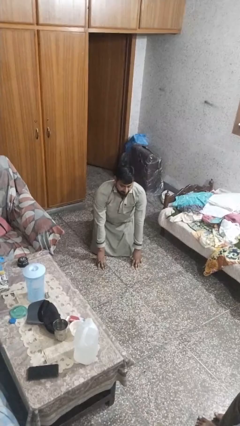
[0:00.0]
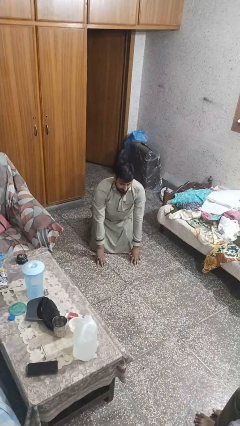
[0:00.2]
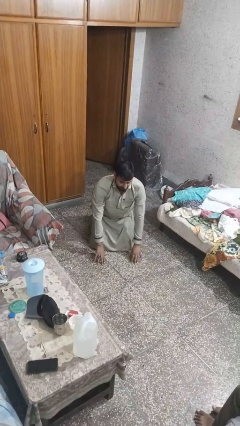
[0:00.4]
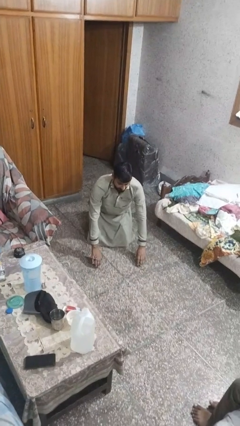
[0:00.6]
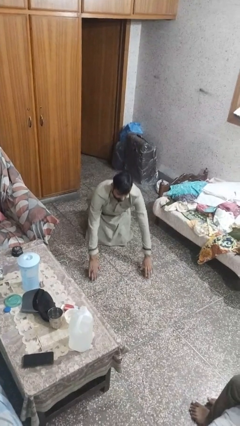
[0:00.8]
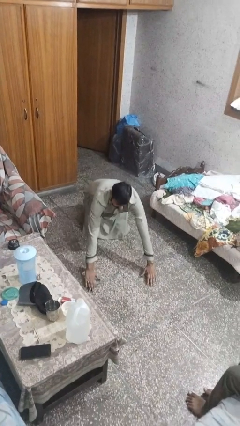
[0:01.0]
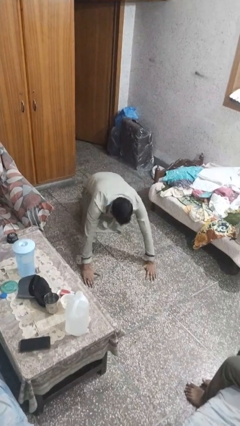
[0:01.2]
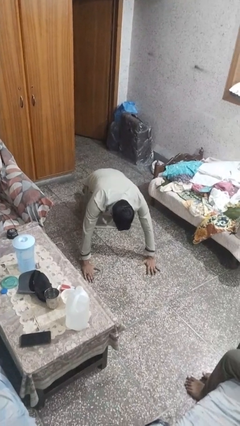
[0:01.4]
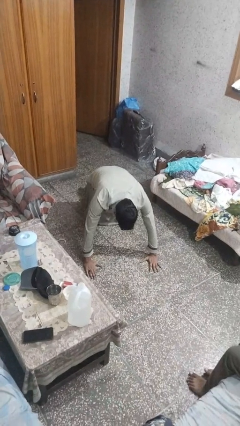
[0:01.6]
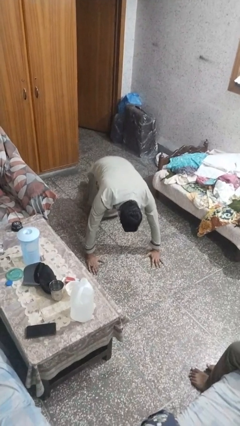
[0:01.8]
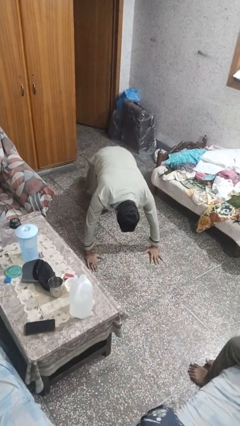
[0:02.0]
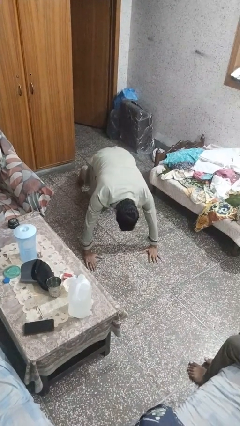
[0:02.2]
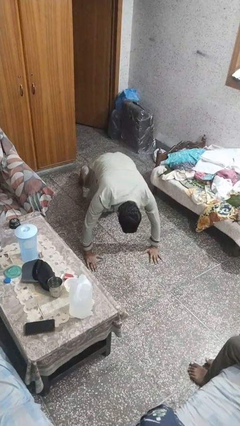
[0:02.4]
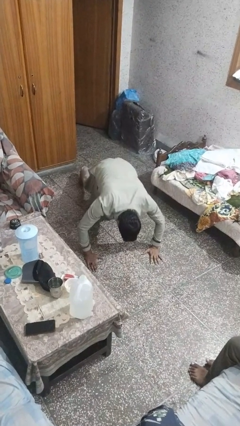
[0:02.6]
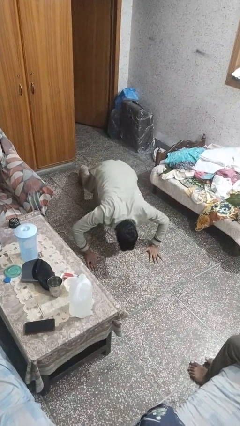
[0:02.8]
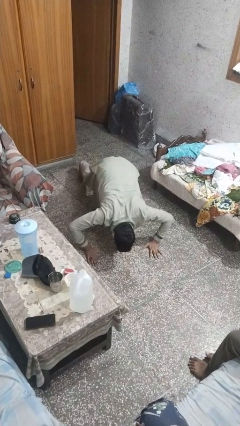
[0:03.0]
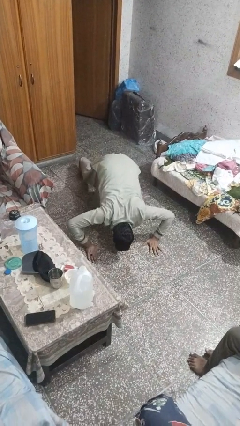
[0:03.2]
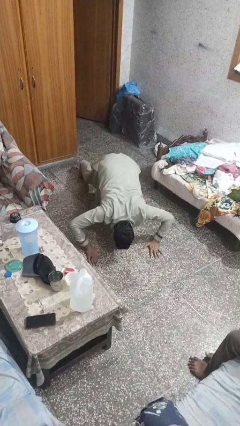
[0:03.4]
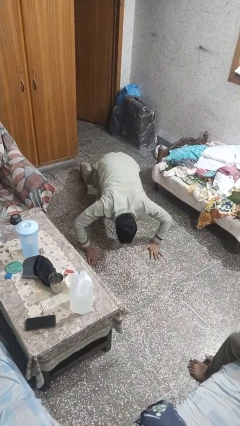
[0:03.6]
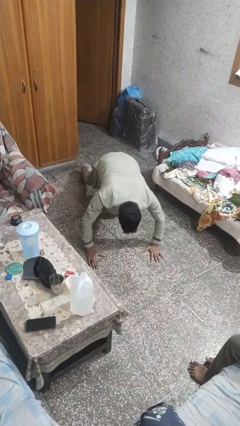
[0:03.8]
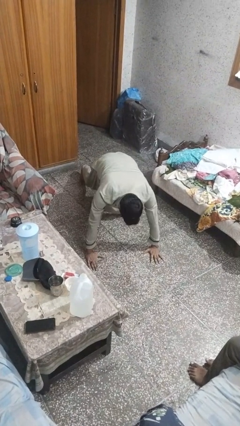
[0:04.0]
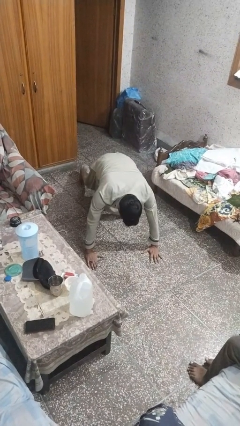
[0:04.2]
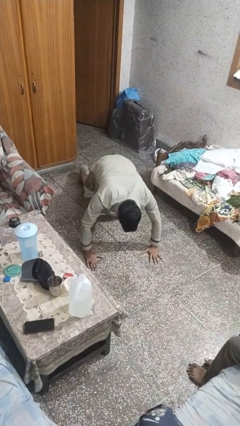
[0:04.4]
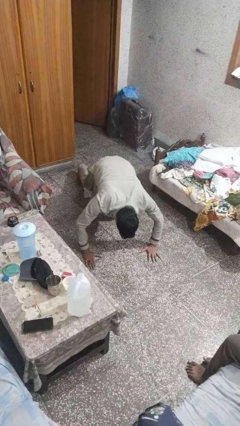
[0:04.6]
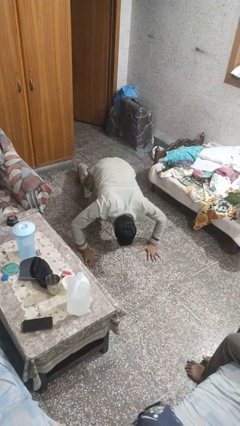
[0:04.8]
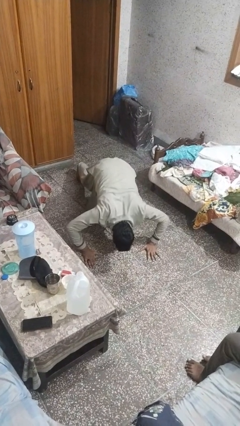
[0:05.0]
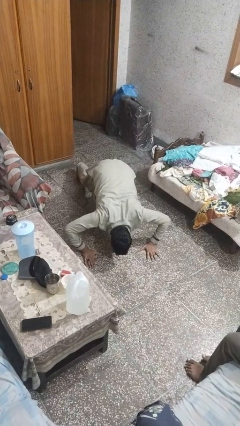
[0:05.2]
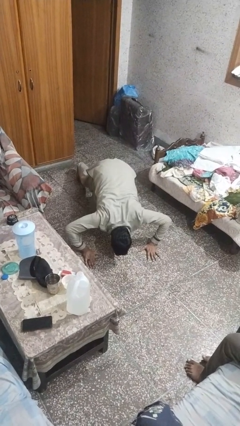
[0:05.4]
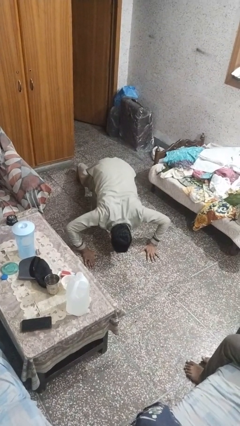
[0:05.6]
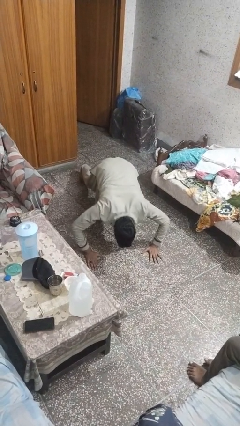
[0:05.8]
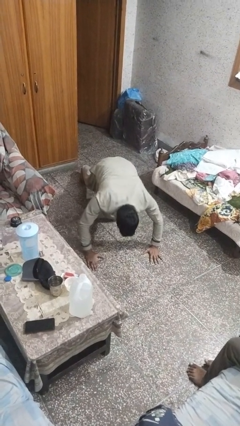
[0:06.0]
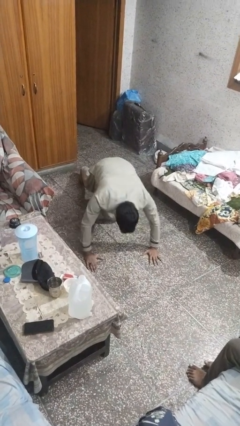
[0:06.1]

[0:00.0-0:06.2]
person exercises with pushup

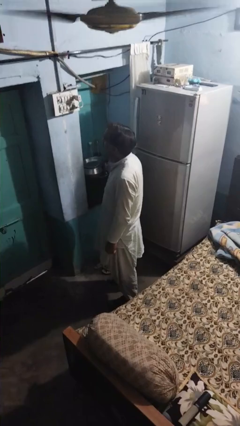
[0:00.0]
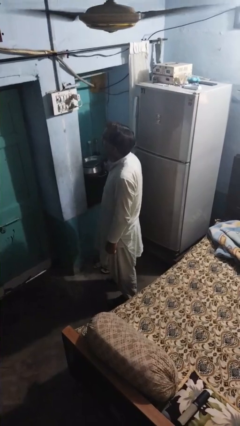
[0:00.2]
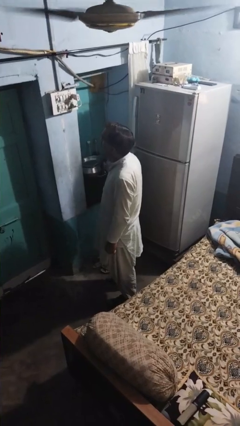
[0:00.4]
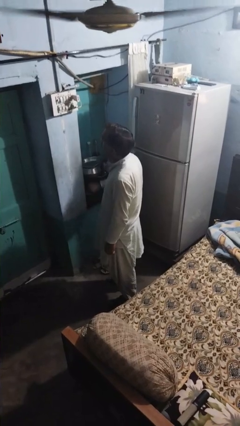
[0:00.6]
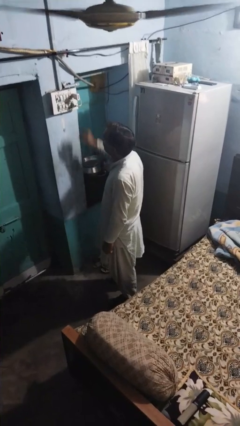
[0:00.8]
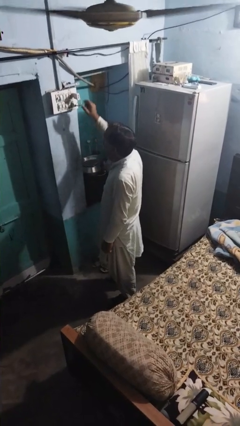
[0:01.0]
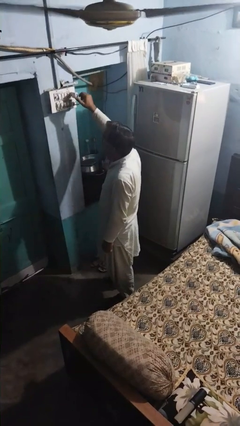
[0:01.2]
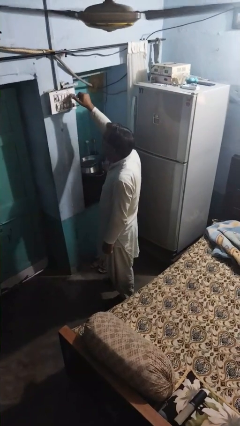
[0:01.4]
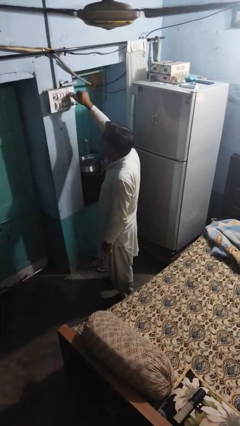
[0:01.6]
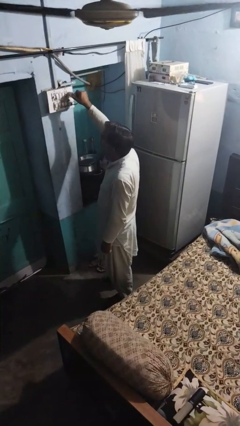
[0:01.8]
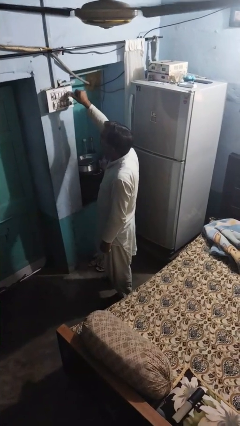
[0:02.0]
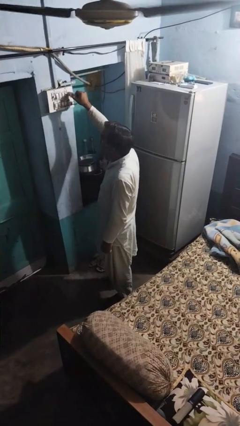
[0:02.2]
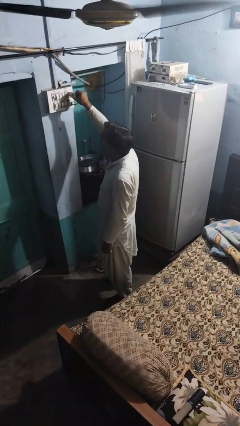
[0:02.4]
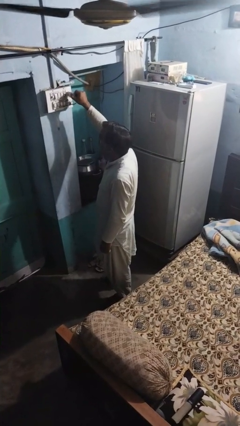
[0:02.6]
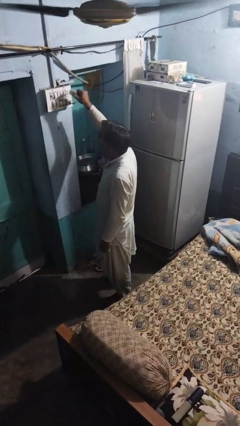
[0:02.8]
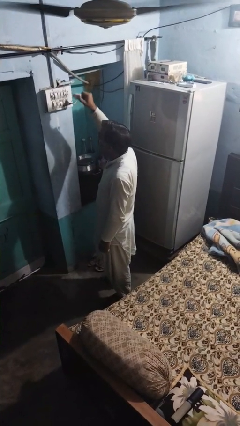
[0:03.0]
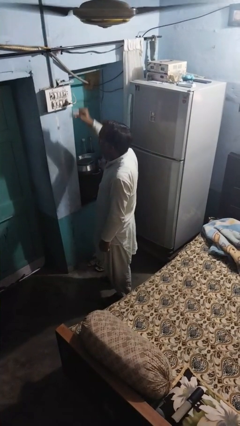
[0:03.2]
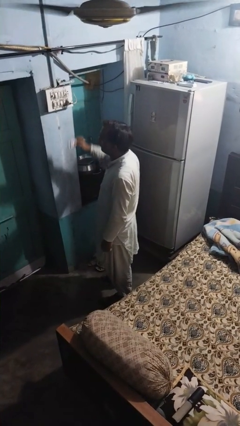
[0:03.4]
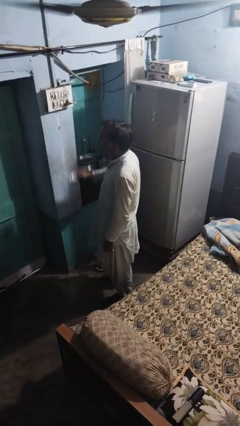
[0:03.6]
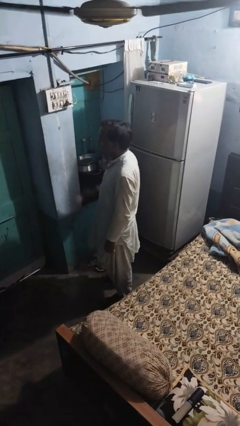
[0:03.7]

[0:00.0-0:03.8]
person unplugs from electrical socket

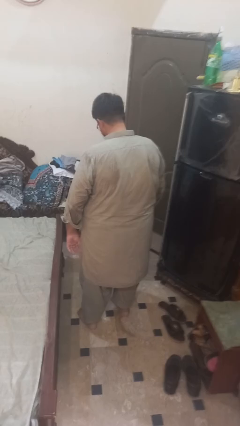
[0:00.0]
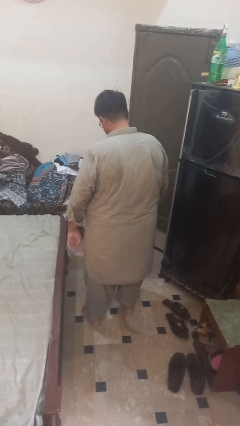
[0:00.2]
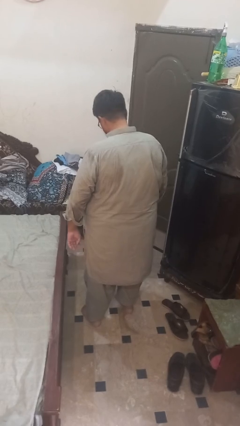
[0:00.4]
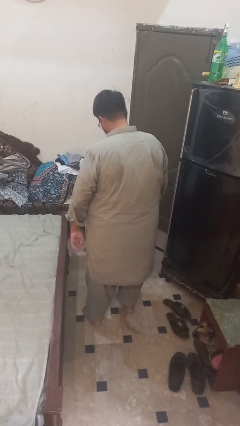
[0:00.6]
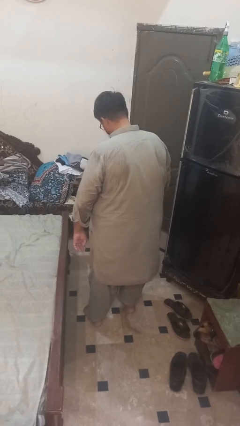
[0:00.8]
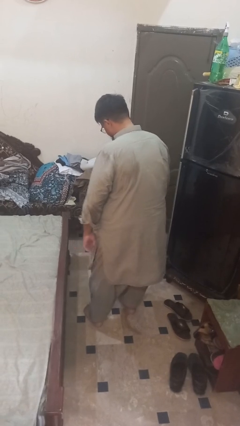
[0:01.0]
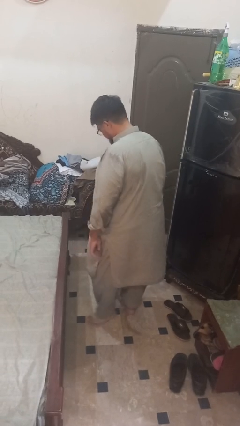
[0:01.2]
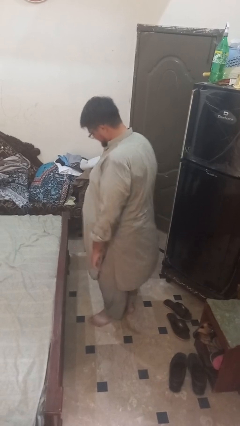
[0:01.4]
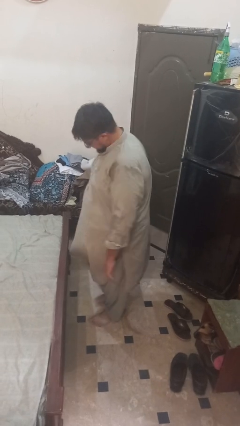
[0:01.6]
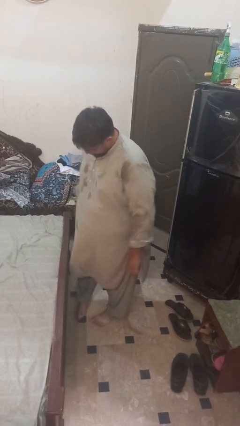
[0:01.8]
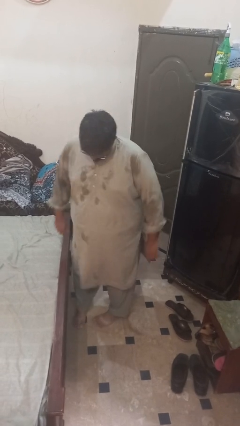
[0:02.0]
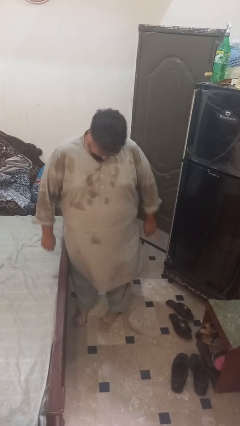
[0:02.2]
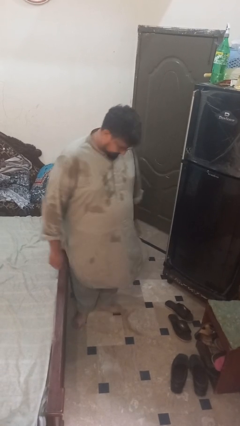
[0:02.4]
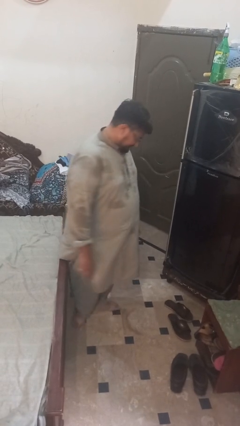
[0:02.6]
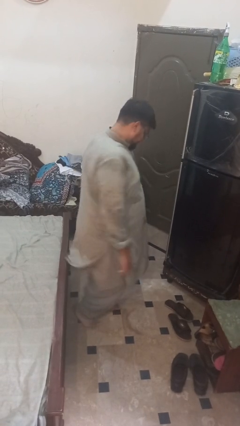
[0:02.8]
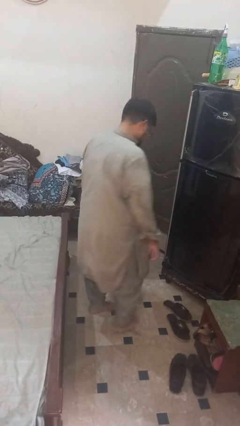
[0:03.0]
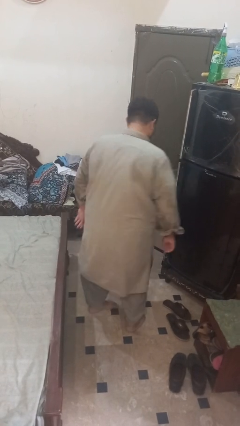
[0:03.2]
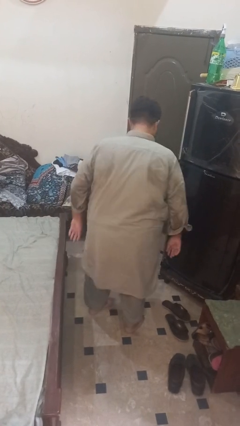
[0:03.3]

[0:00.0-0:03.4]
person twirls

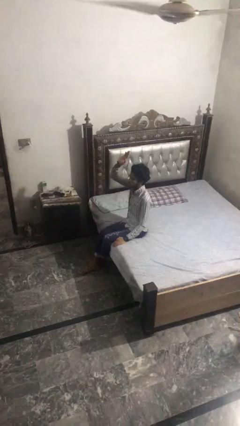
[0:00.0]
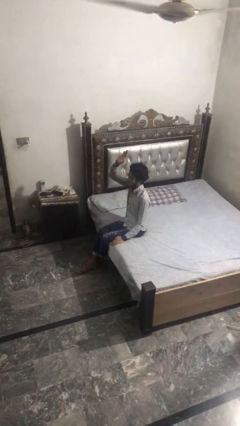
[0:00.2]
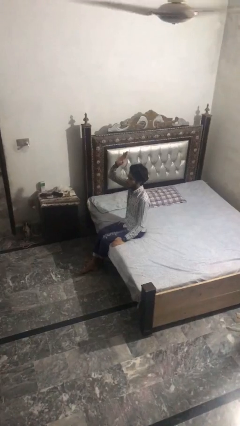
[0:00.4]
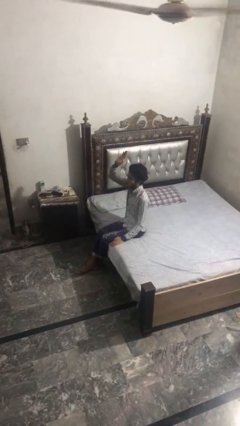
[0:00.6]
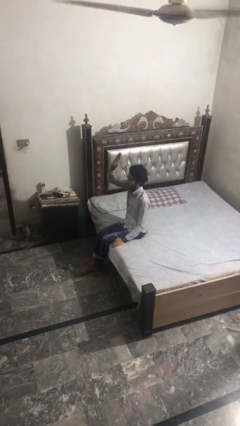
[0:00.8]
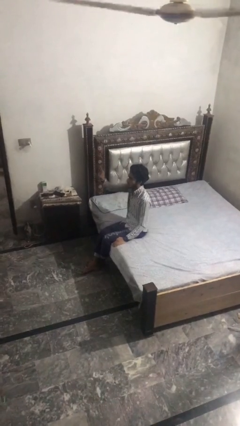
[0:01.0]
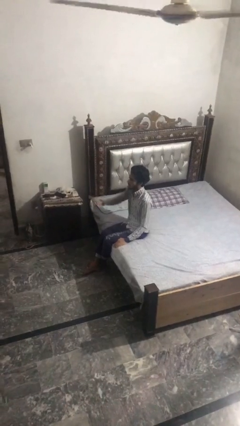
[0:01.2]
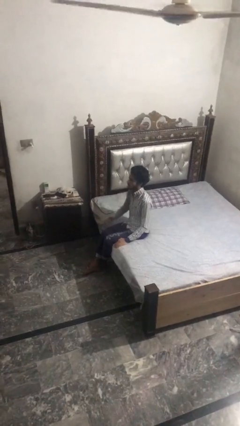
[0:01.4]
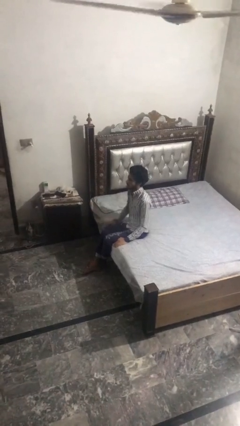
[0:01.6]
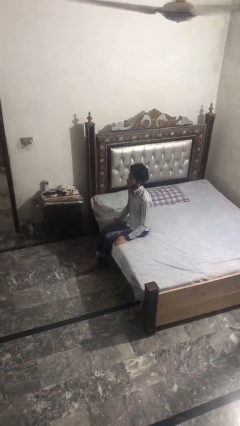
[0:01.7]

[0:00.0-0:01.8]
person gestures lower hand

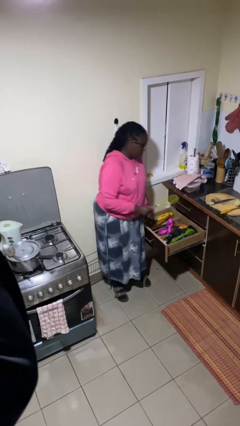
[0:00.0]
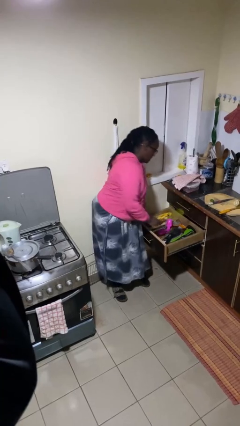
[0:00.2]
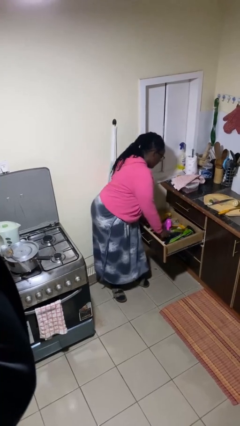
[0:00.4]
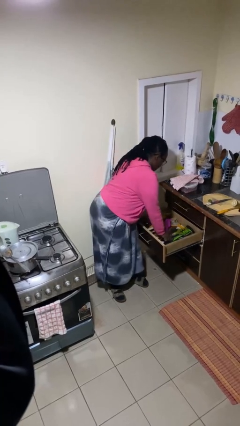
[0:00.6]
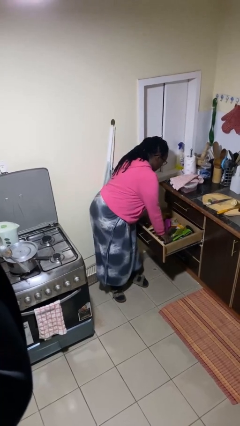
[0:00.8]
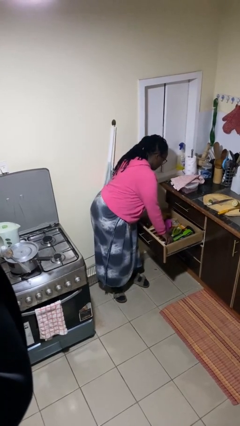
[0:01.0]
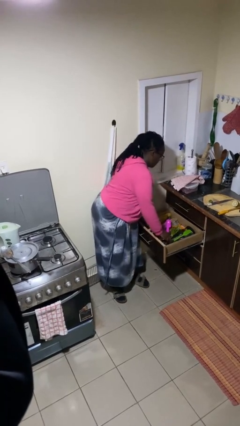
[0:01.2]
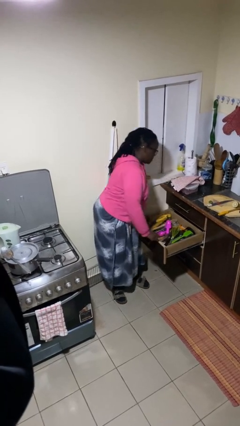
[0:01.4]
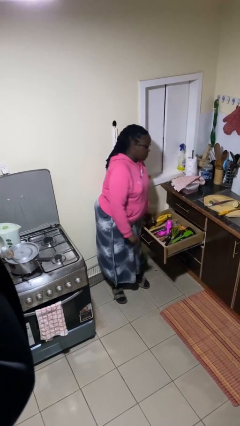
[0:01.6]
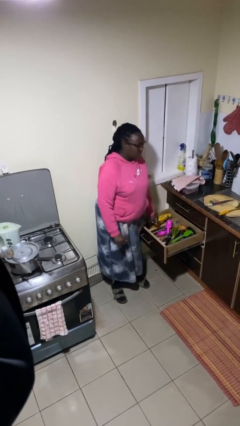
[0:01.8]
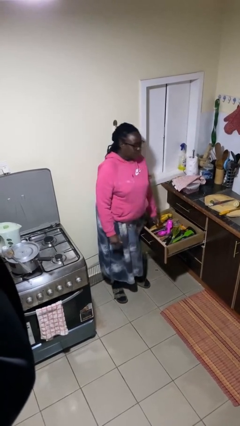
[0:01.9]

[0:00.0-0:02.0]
person puts object into kitchen drawer
